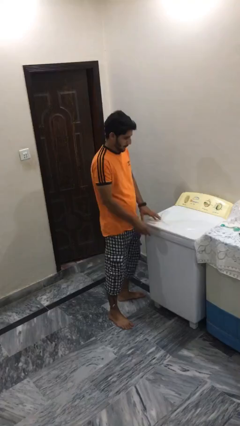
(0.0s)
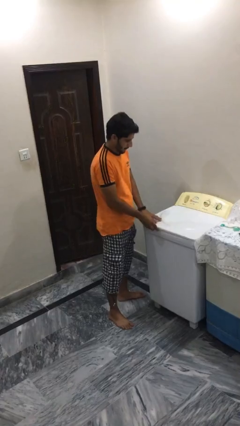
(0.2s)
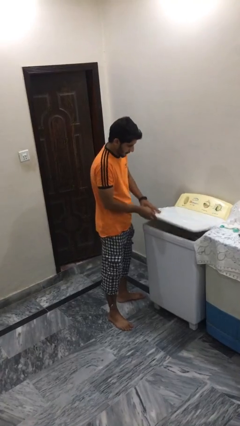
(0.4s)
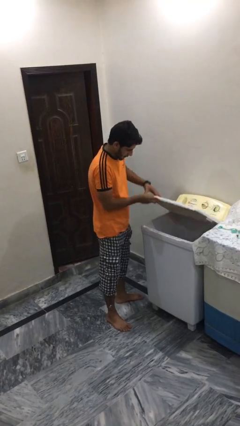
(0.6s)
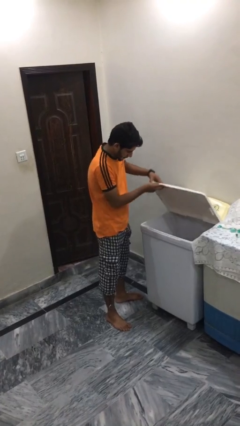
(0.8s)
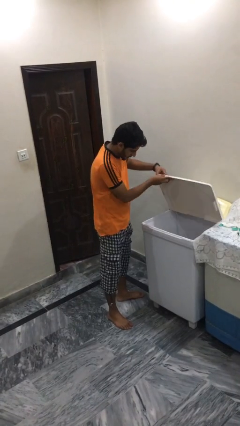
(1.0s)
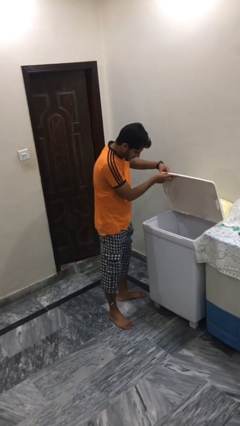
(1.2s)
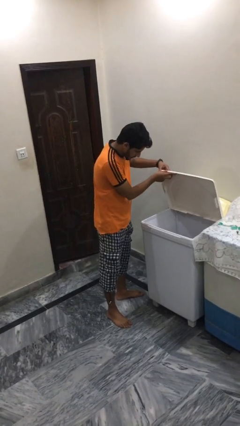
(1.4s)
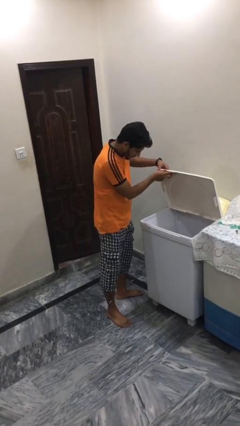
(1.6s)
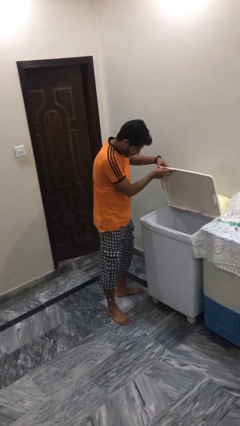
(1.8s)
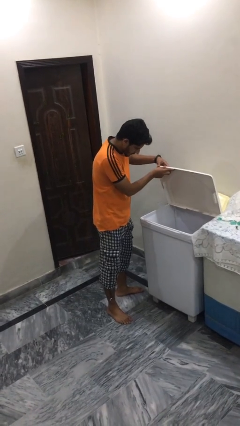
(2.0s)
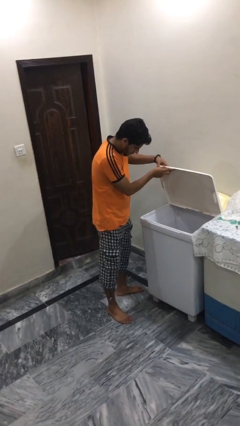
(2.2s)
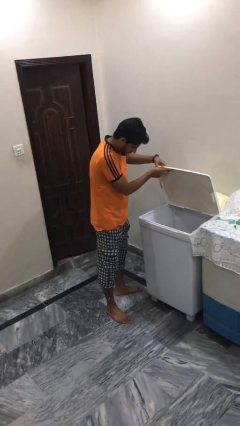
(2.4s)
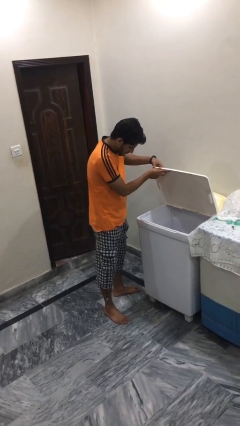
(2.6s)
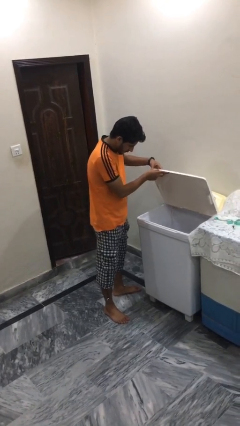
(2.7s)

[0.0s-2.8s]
person opens clothes washer

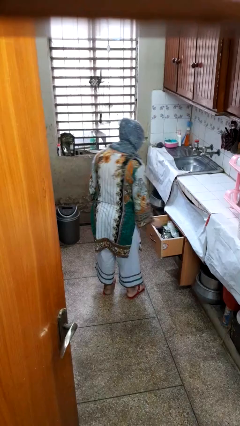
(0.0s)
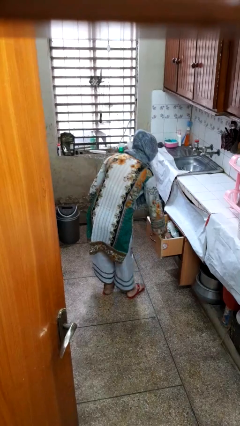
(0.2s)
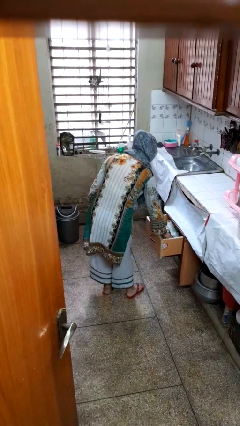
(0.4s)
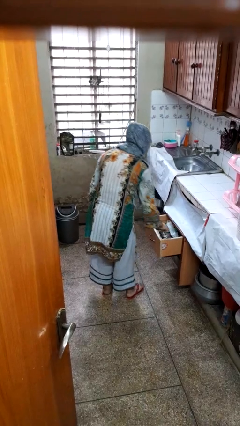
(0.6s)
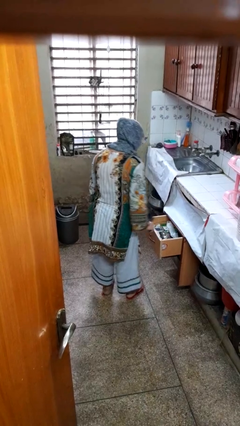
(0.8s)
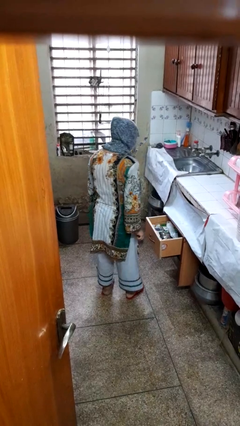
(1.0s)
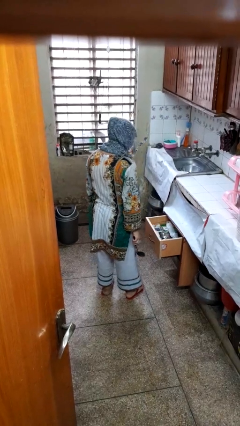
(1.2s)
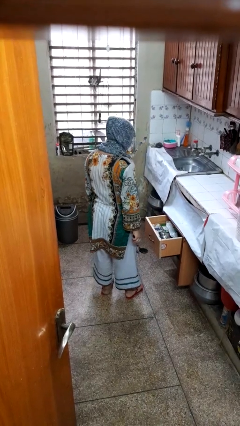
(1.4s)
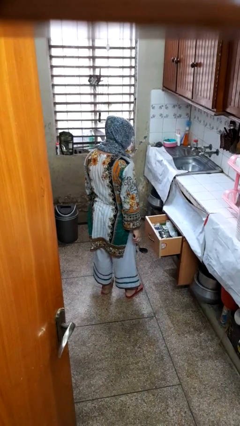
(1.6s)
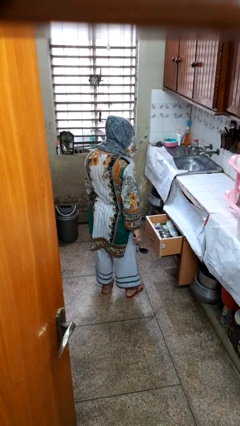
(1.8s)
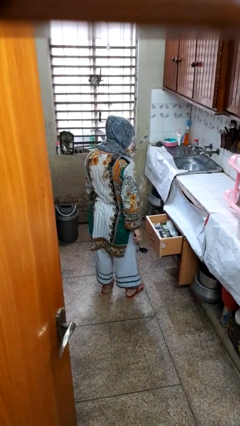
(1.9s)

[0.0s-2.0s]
person takes object from kitchen drawer

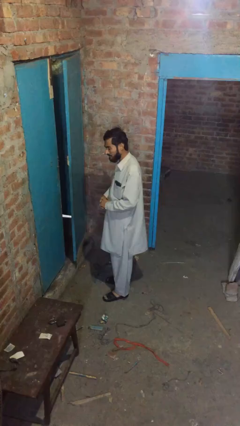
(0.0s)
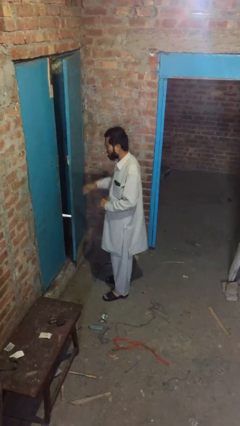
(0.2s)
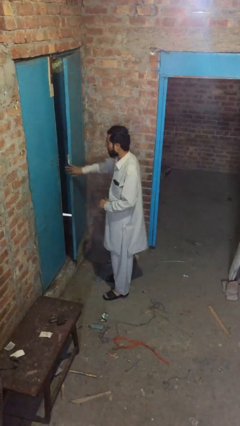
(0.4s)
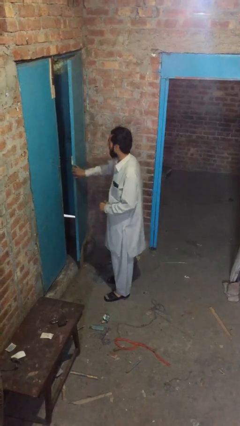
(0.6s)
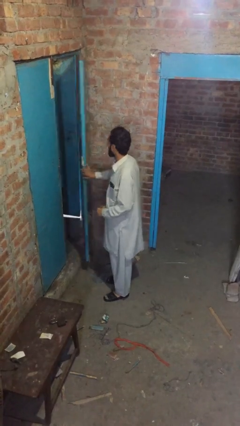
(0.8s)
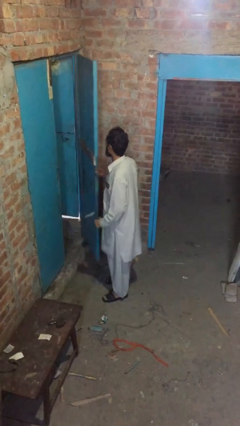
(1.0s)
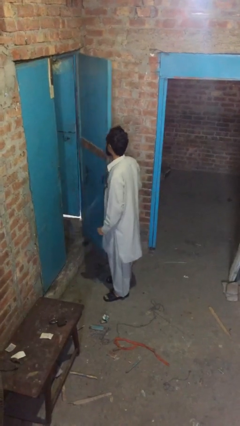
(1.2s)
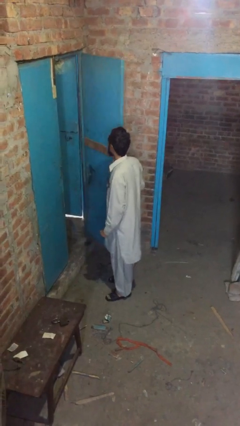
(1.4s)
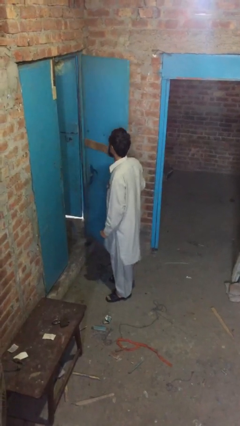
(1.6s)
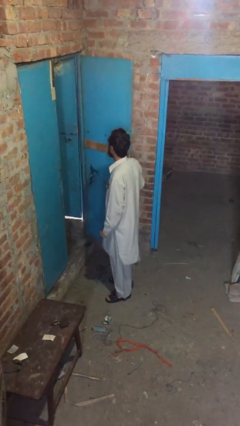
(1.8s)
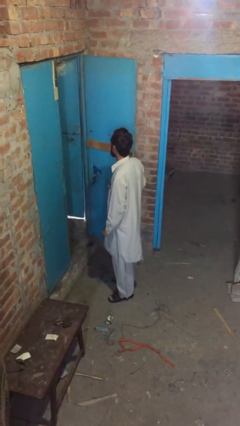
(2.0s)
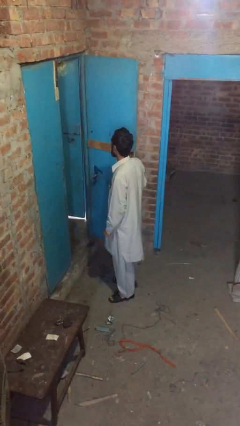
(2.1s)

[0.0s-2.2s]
person opens facility door

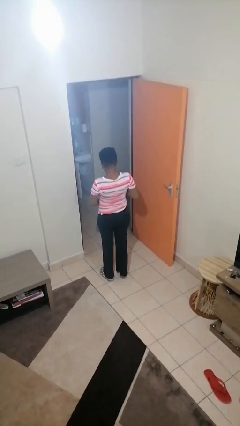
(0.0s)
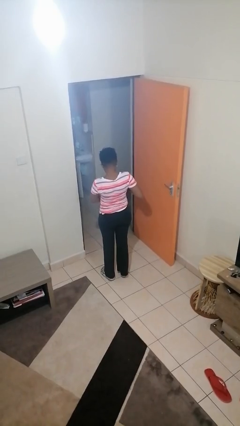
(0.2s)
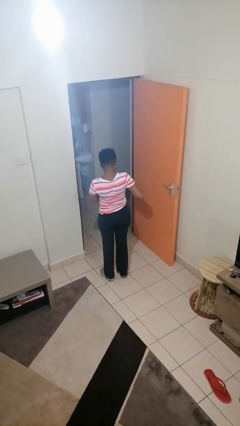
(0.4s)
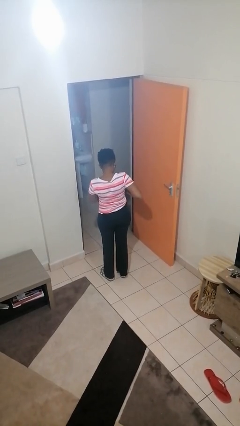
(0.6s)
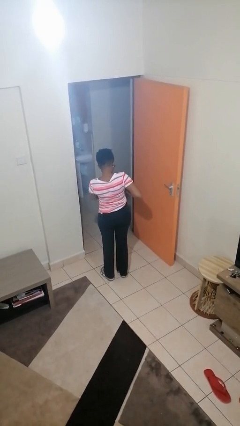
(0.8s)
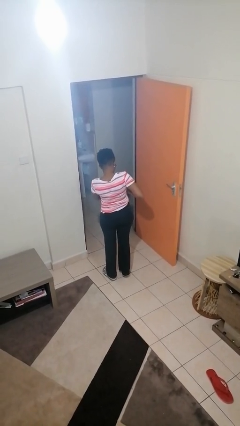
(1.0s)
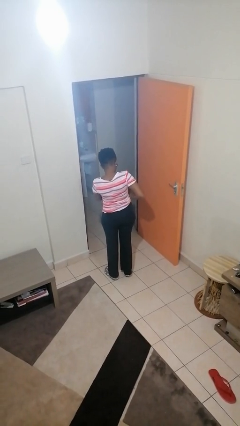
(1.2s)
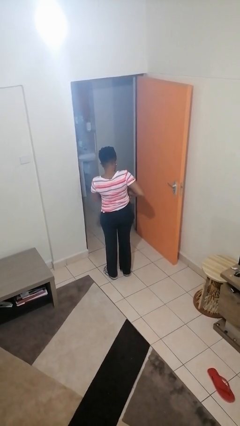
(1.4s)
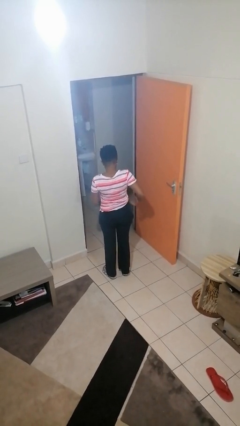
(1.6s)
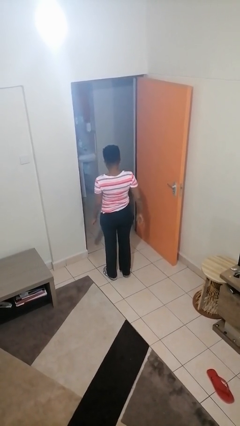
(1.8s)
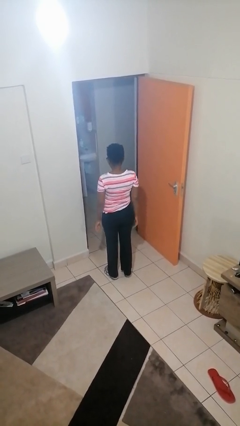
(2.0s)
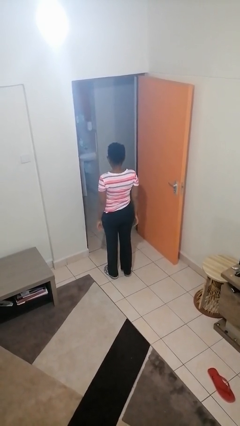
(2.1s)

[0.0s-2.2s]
person puts phone into pocket

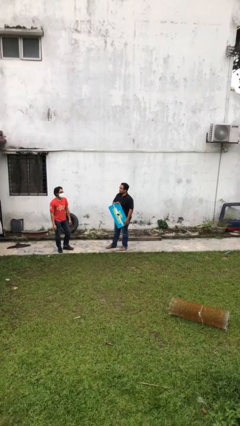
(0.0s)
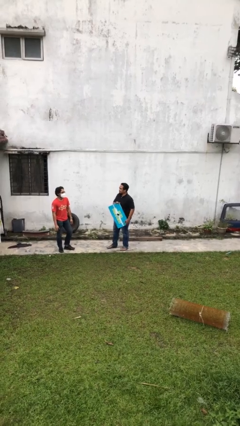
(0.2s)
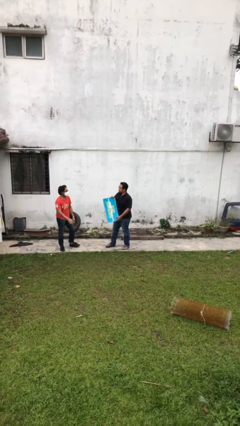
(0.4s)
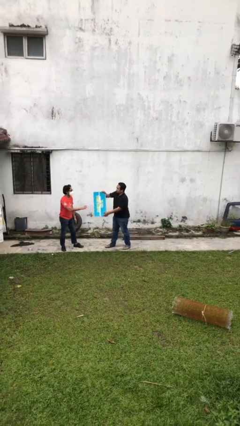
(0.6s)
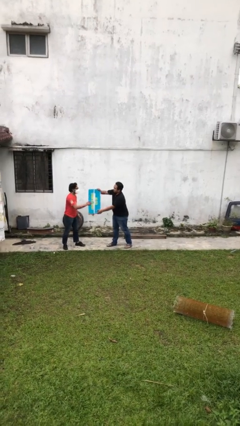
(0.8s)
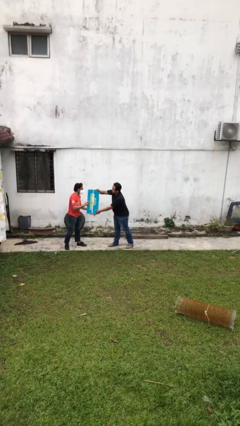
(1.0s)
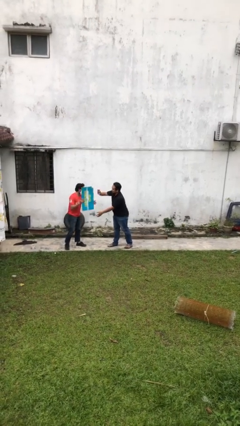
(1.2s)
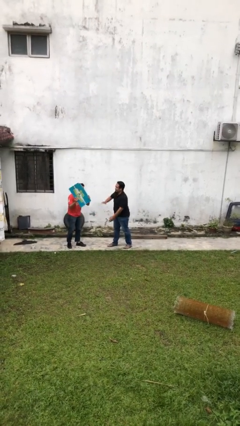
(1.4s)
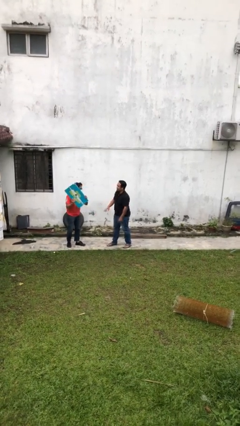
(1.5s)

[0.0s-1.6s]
person transfers object to person

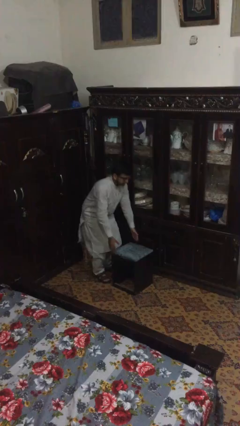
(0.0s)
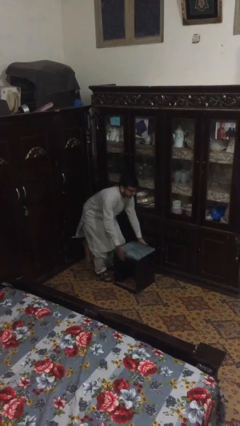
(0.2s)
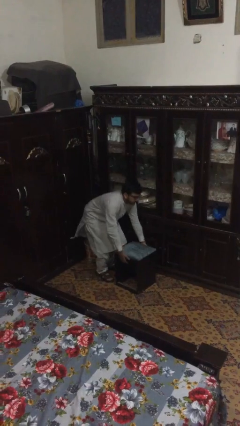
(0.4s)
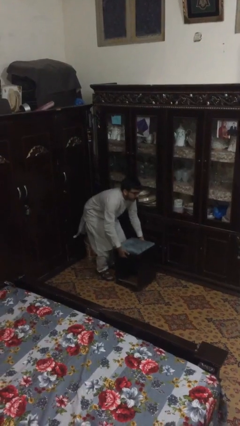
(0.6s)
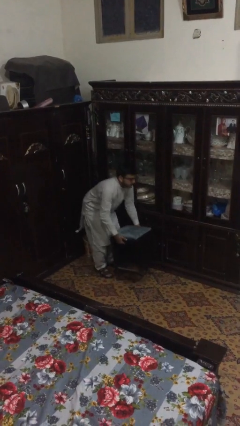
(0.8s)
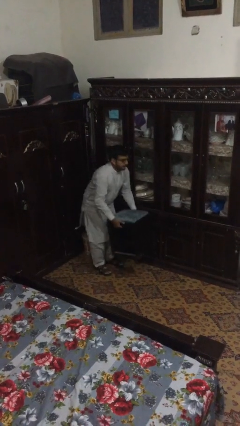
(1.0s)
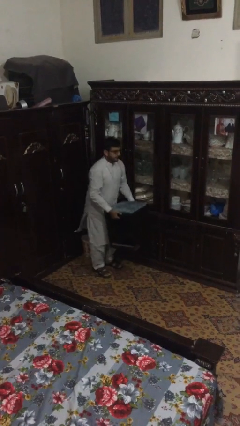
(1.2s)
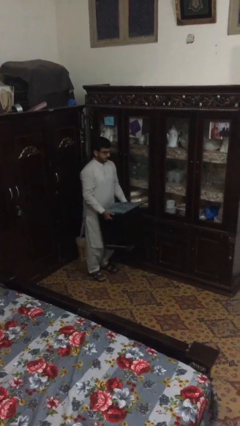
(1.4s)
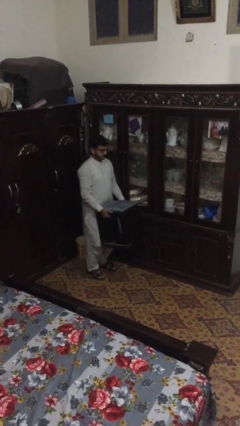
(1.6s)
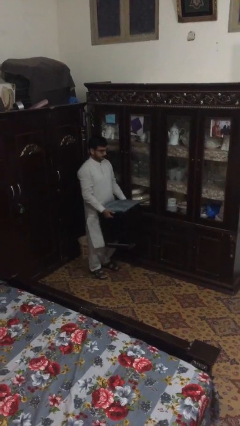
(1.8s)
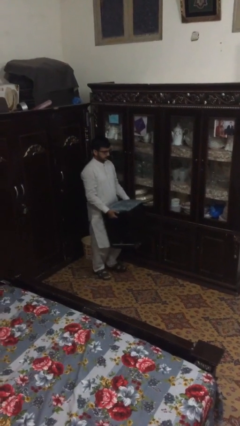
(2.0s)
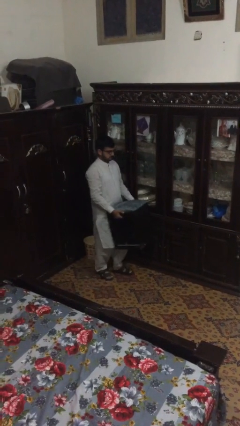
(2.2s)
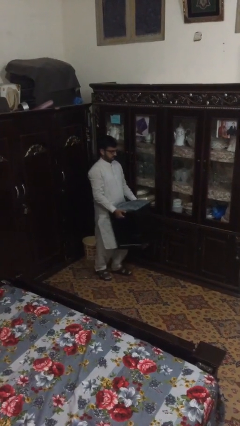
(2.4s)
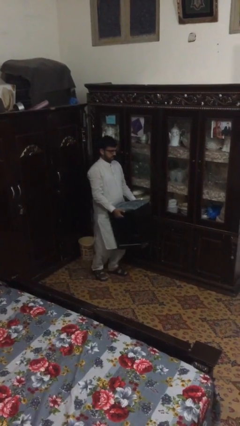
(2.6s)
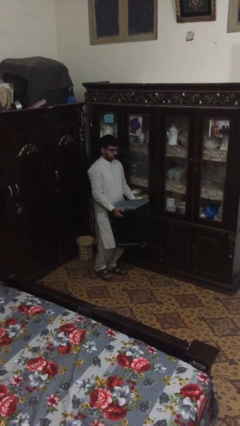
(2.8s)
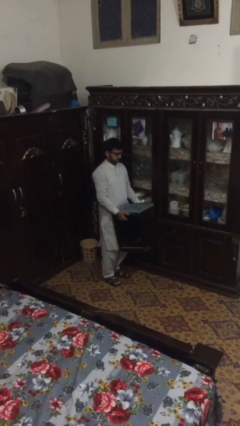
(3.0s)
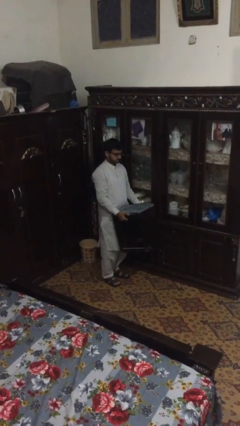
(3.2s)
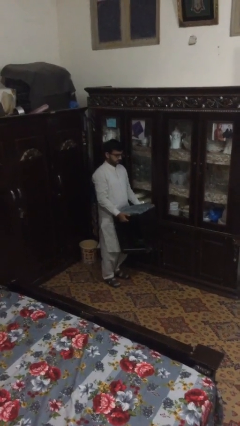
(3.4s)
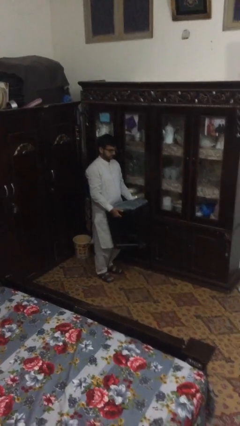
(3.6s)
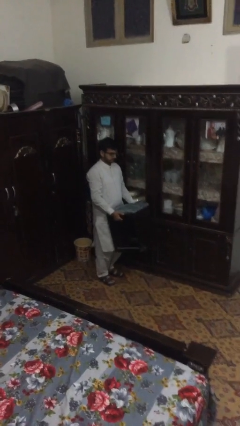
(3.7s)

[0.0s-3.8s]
person picks up object from floor

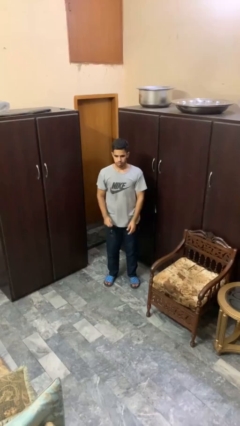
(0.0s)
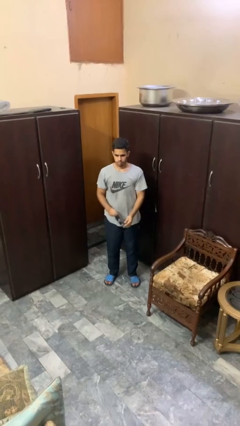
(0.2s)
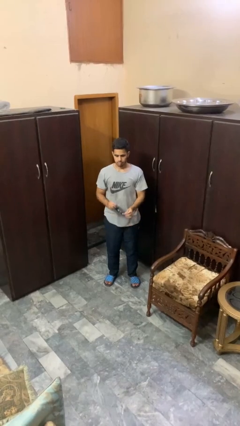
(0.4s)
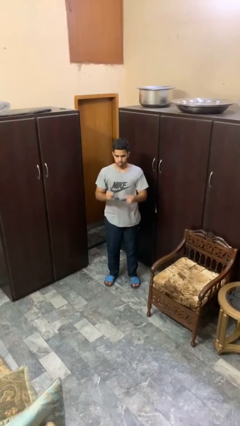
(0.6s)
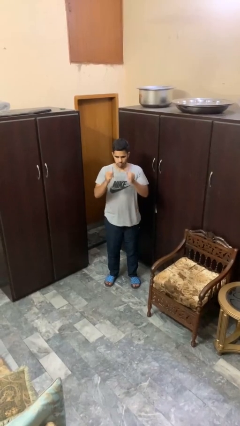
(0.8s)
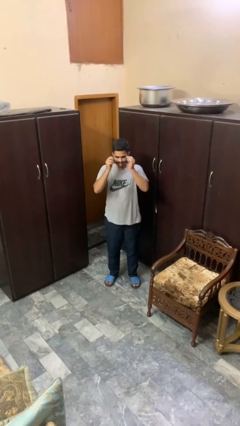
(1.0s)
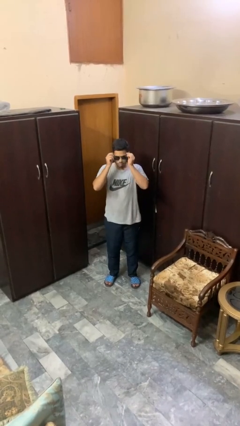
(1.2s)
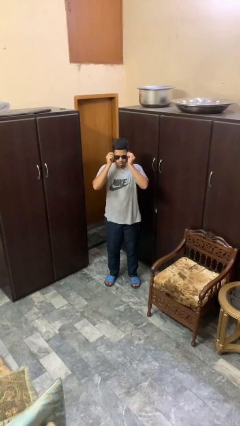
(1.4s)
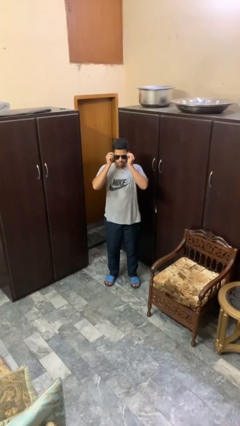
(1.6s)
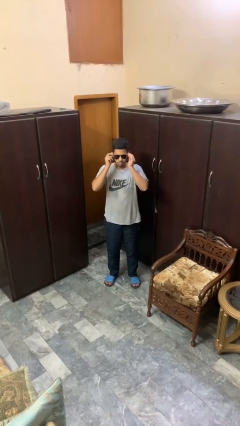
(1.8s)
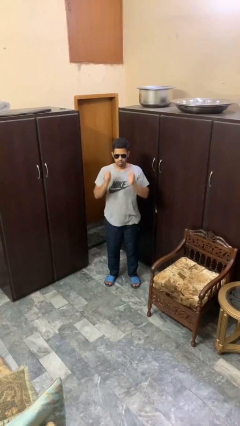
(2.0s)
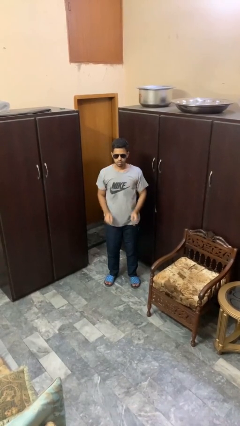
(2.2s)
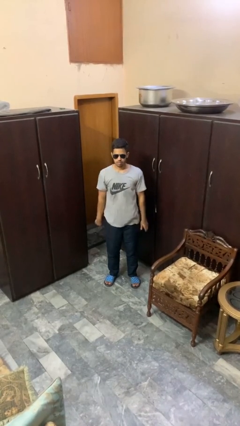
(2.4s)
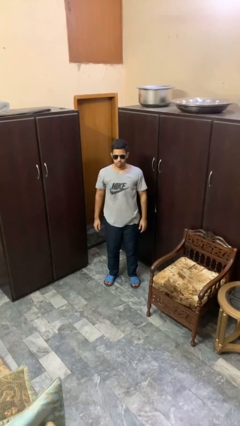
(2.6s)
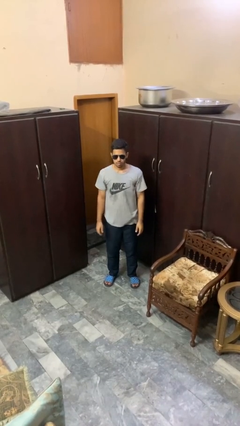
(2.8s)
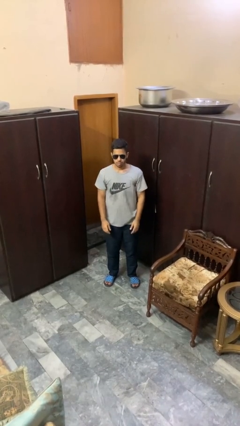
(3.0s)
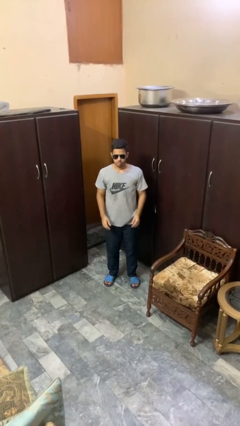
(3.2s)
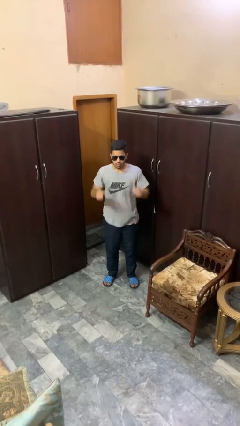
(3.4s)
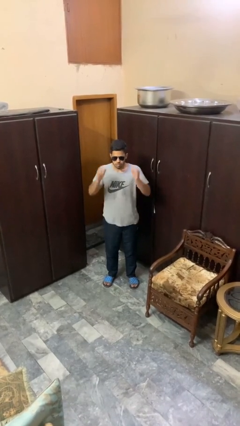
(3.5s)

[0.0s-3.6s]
person puts on sunglasses
